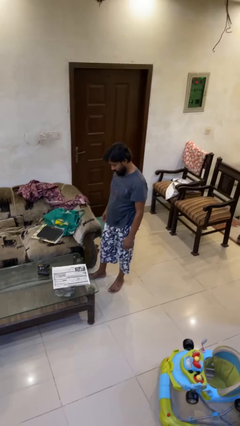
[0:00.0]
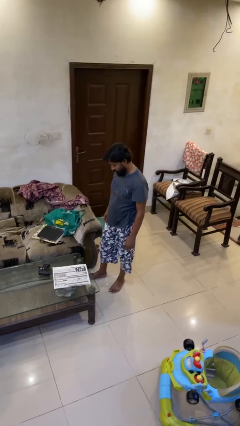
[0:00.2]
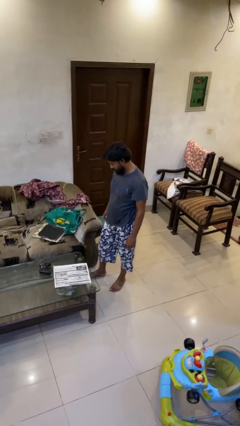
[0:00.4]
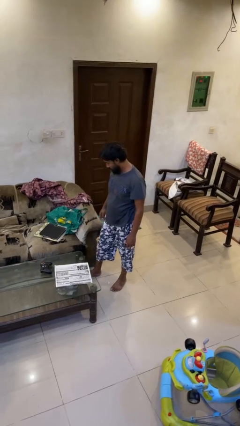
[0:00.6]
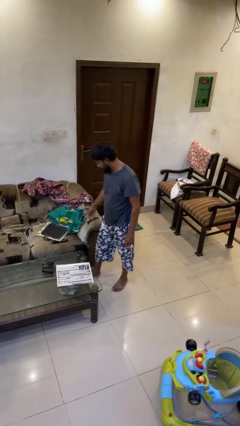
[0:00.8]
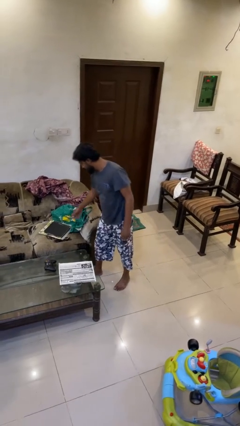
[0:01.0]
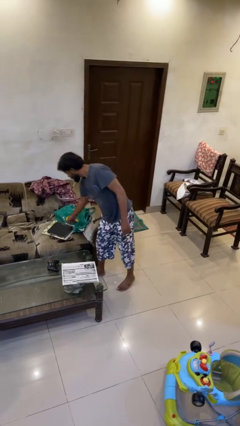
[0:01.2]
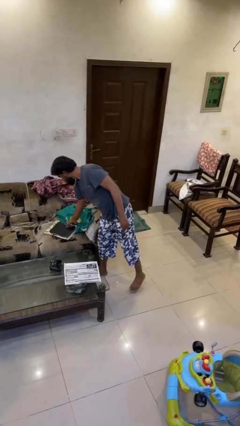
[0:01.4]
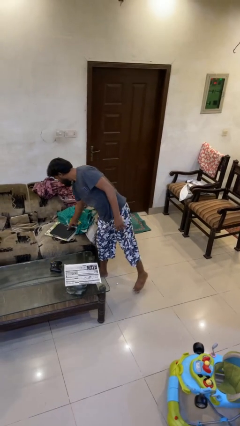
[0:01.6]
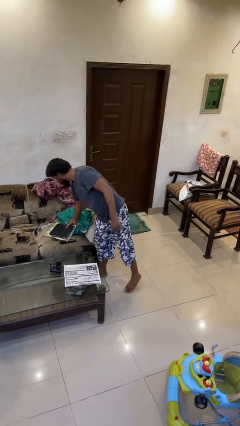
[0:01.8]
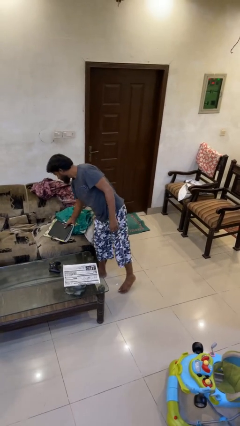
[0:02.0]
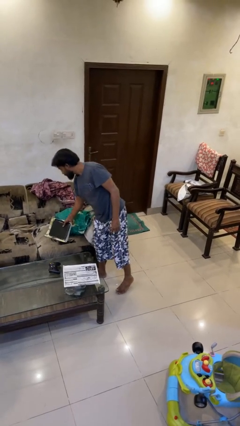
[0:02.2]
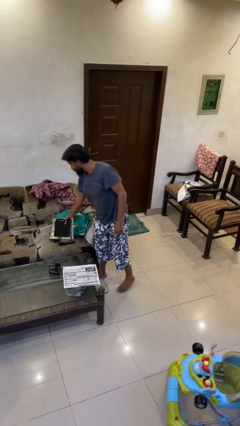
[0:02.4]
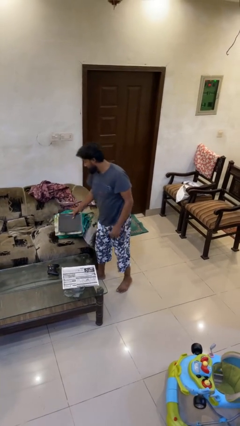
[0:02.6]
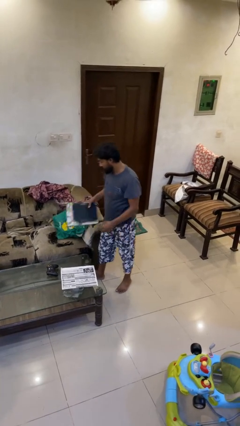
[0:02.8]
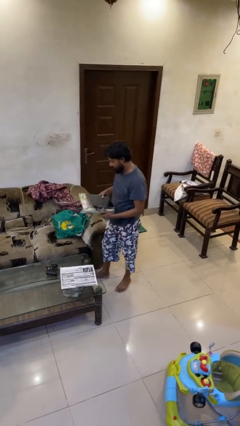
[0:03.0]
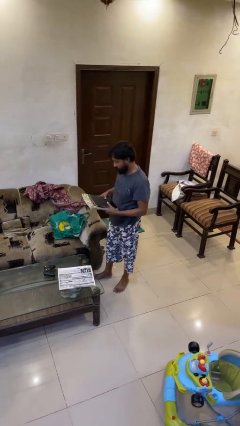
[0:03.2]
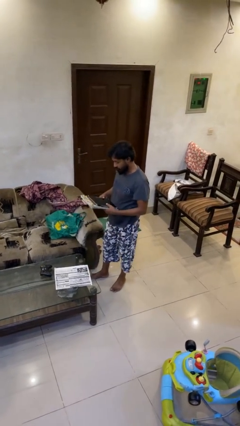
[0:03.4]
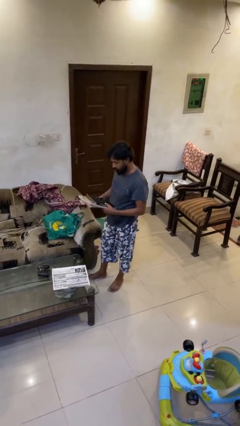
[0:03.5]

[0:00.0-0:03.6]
person picks up object from couch

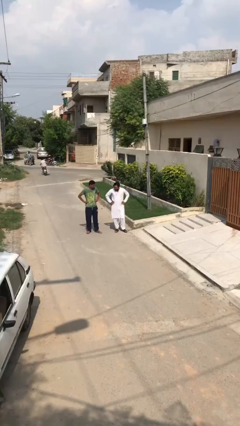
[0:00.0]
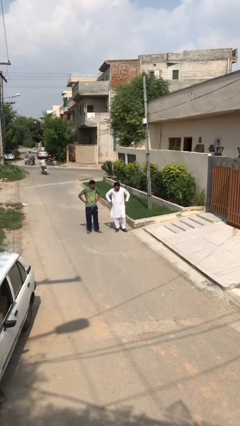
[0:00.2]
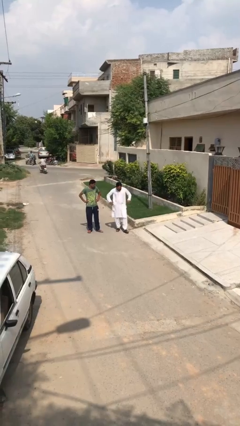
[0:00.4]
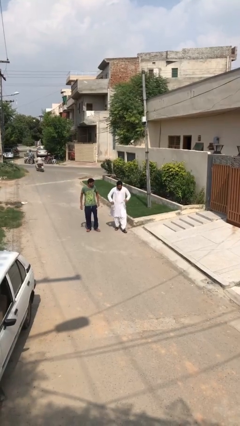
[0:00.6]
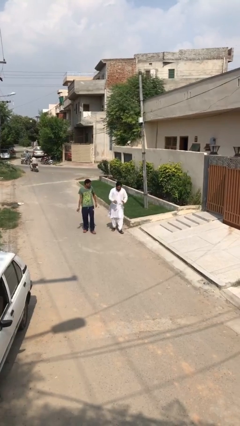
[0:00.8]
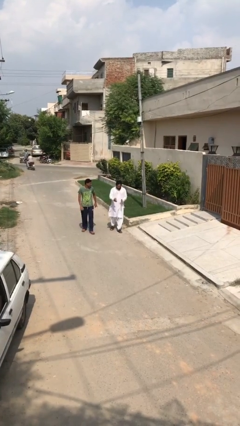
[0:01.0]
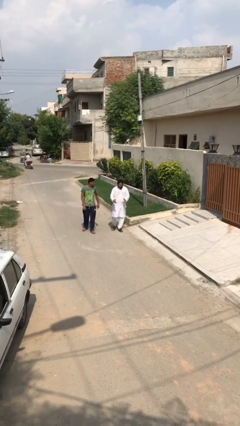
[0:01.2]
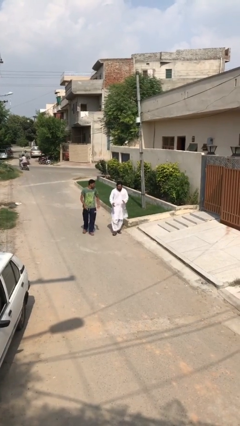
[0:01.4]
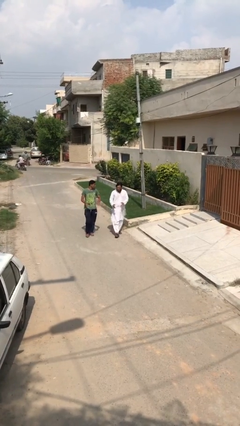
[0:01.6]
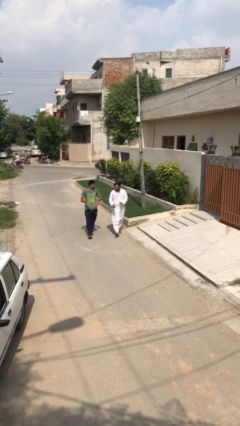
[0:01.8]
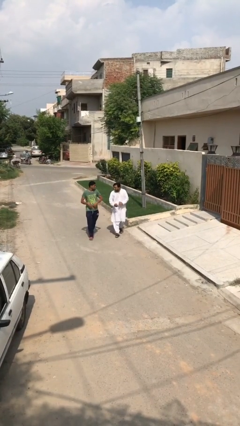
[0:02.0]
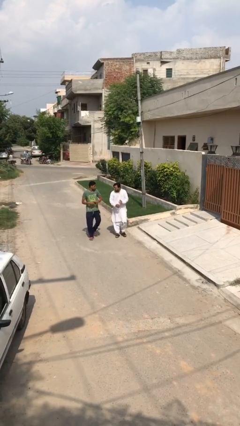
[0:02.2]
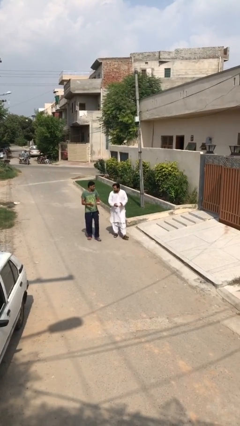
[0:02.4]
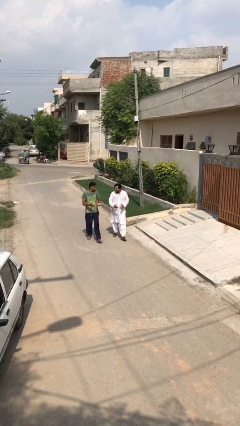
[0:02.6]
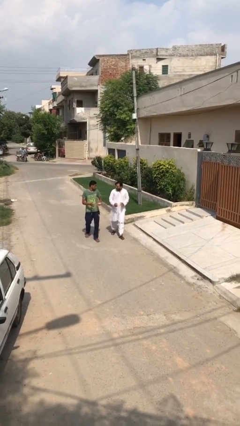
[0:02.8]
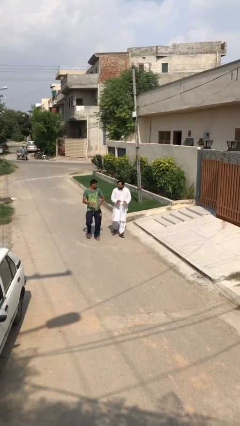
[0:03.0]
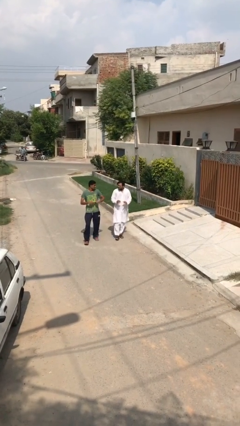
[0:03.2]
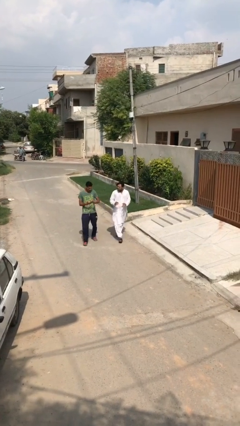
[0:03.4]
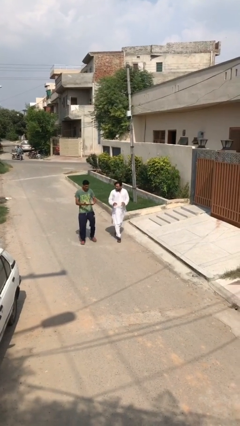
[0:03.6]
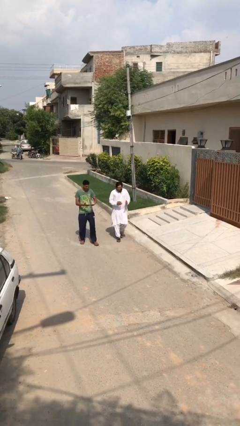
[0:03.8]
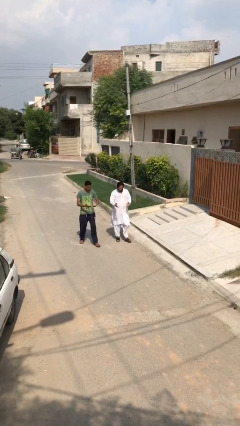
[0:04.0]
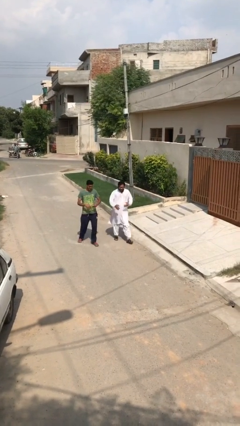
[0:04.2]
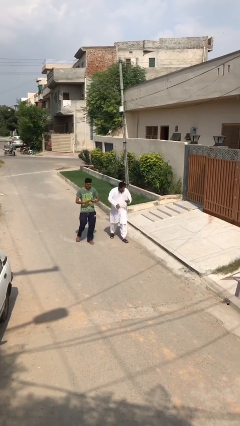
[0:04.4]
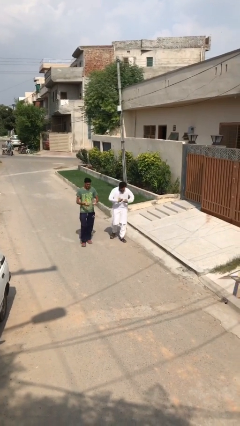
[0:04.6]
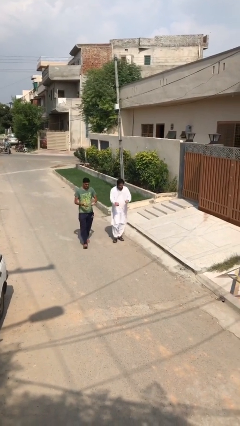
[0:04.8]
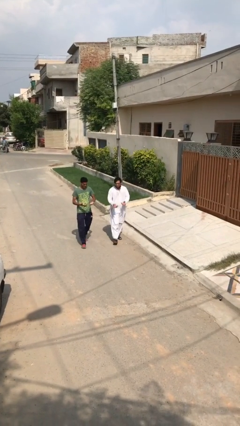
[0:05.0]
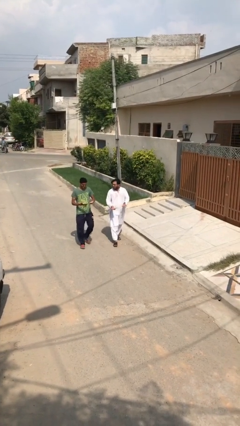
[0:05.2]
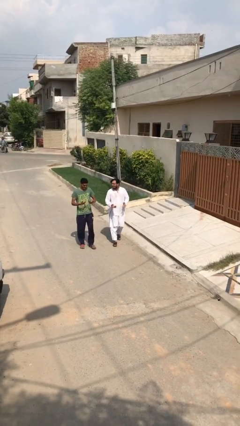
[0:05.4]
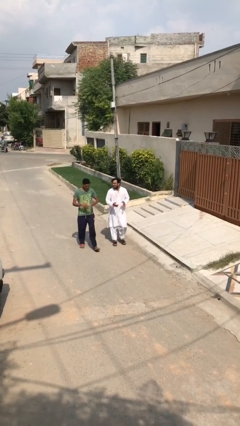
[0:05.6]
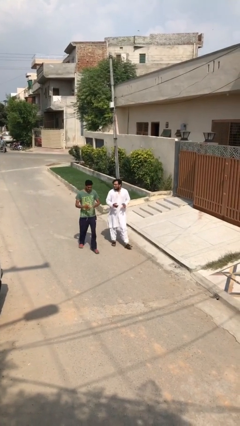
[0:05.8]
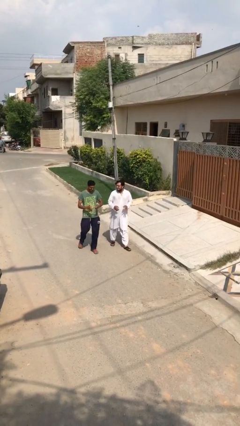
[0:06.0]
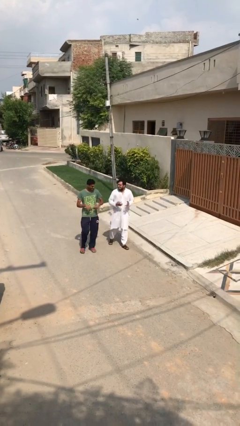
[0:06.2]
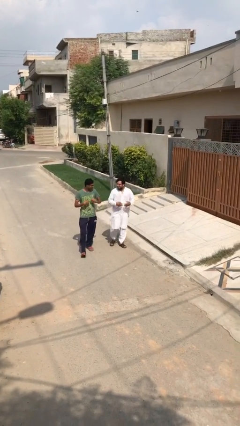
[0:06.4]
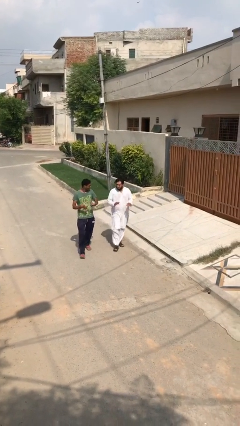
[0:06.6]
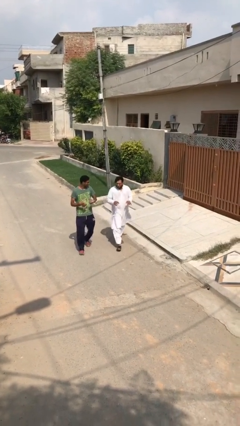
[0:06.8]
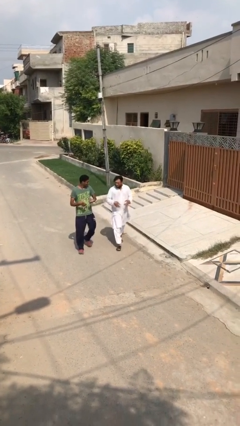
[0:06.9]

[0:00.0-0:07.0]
person talks to person

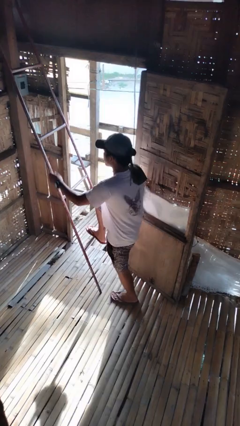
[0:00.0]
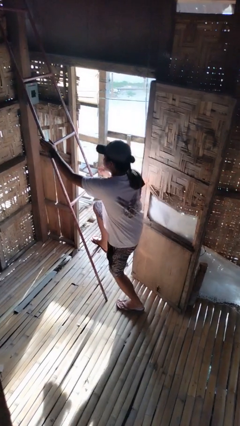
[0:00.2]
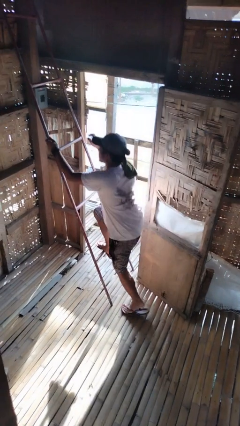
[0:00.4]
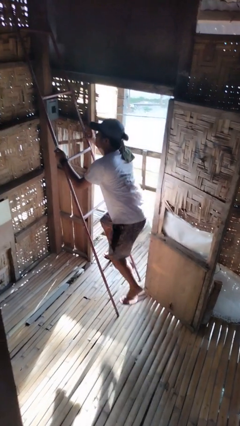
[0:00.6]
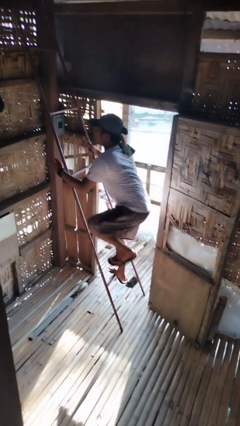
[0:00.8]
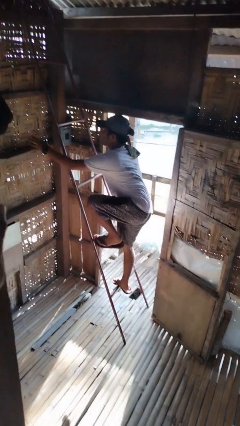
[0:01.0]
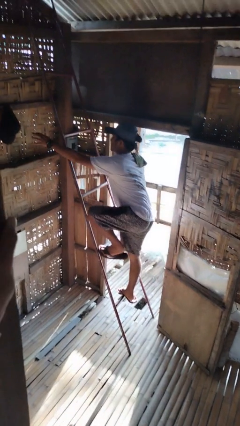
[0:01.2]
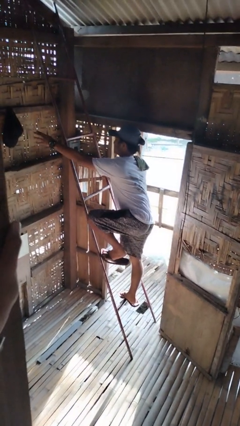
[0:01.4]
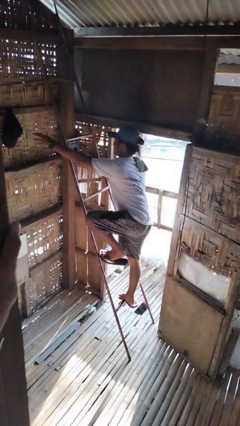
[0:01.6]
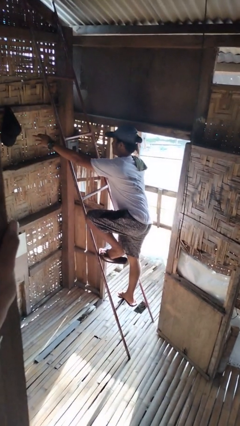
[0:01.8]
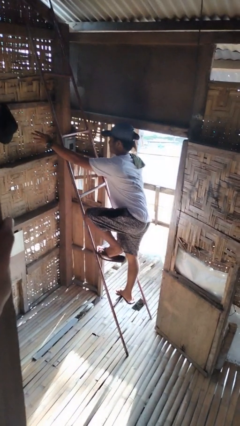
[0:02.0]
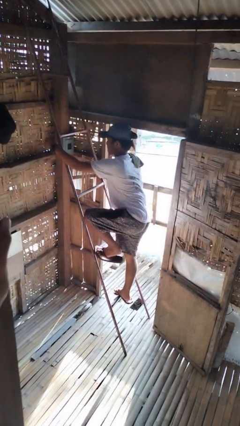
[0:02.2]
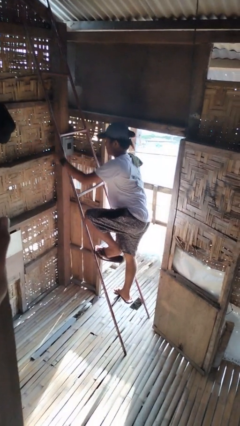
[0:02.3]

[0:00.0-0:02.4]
person climbs up ladder

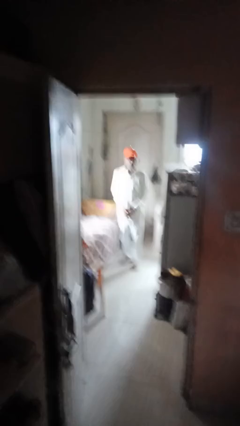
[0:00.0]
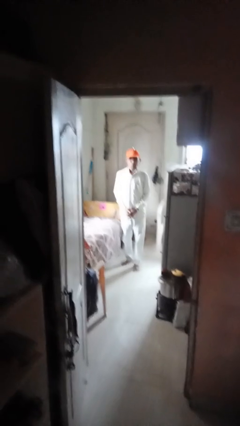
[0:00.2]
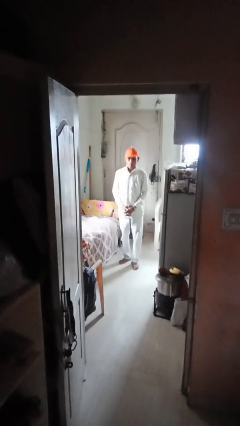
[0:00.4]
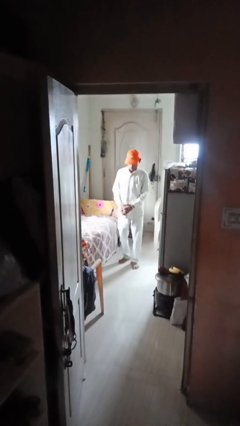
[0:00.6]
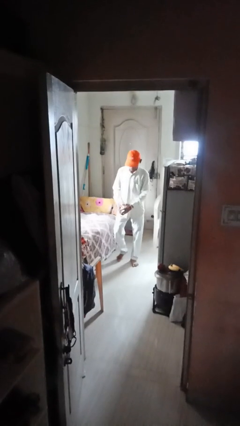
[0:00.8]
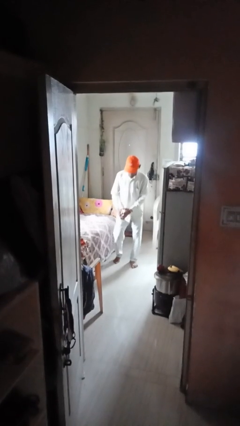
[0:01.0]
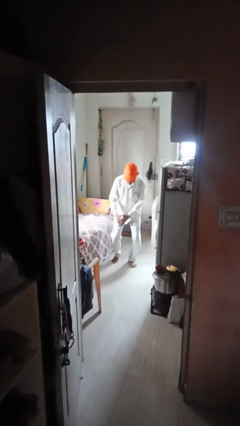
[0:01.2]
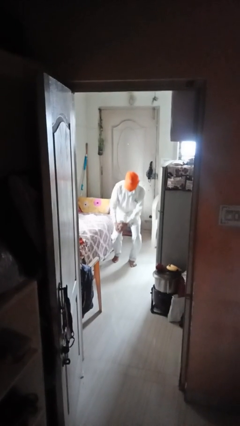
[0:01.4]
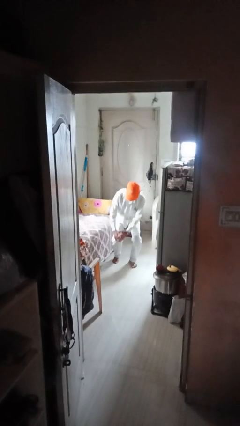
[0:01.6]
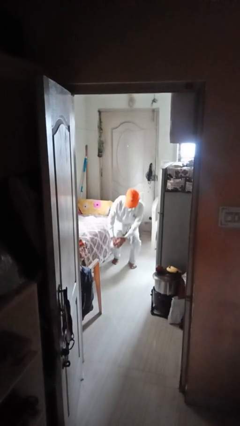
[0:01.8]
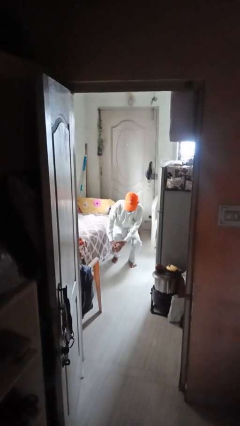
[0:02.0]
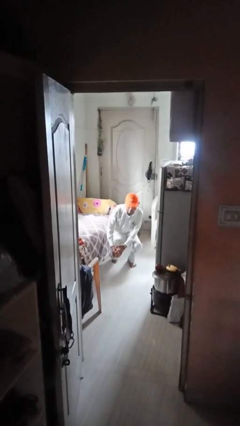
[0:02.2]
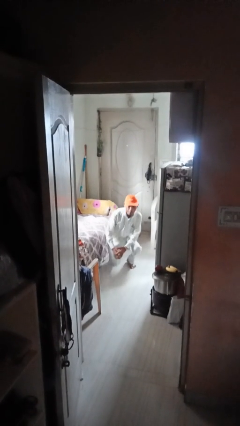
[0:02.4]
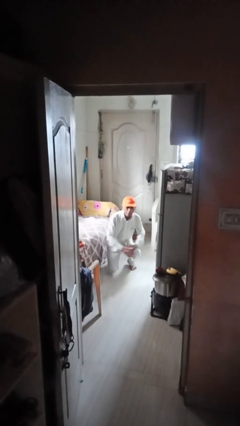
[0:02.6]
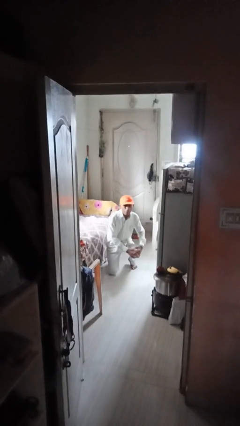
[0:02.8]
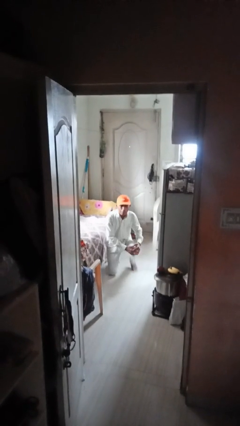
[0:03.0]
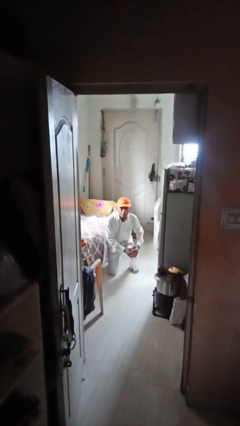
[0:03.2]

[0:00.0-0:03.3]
person exercises with lunges

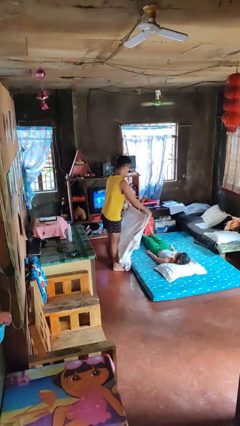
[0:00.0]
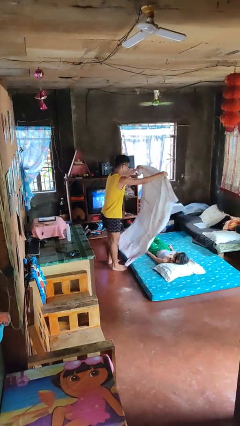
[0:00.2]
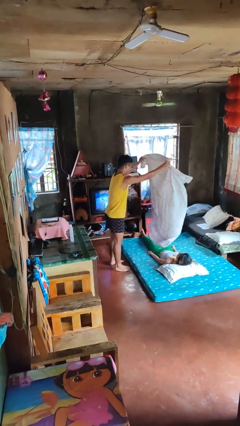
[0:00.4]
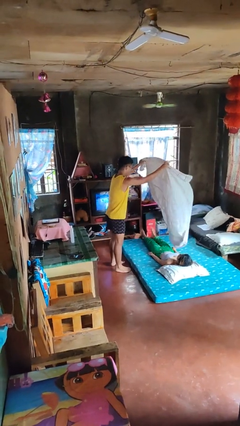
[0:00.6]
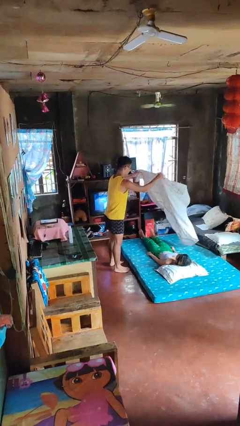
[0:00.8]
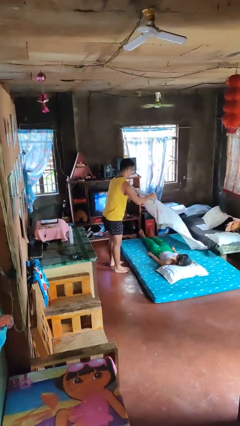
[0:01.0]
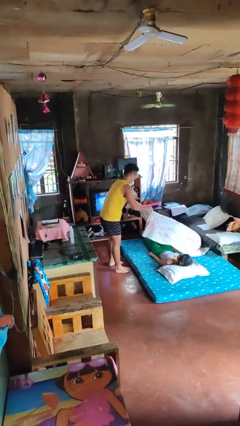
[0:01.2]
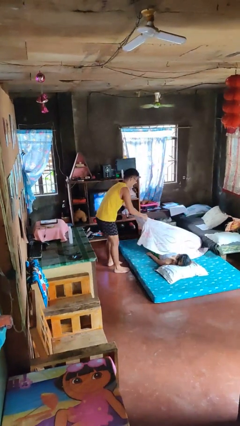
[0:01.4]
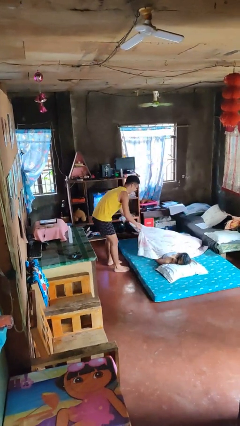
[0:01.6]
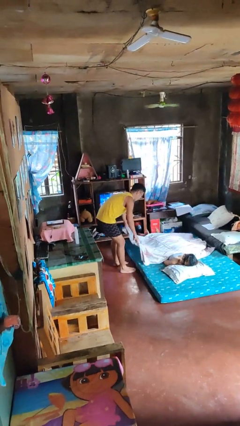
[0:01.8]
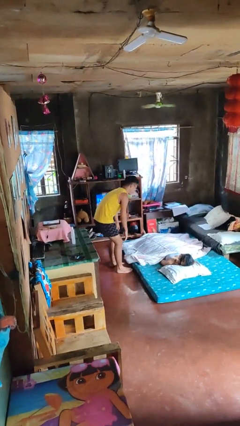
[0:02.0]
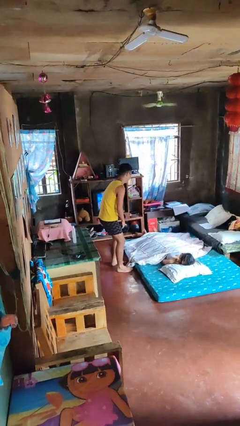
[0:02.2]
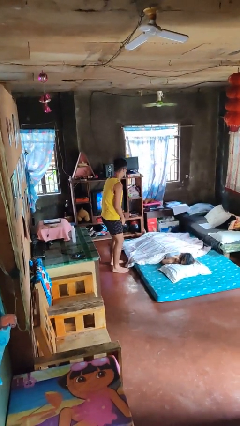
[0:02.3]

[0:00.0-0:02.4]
person covers friend with blanket
